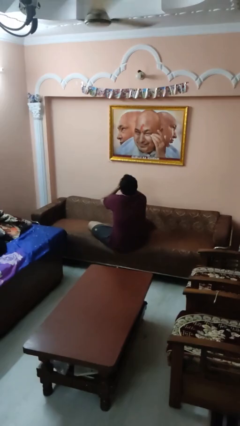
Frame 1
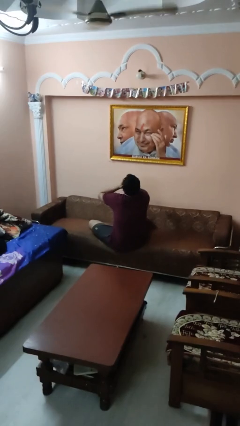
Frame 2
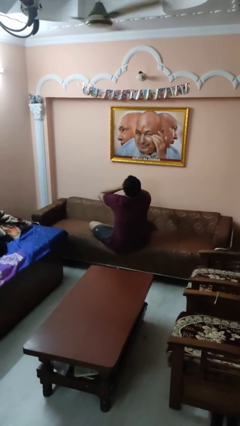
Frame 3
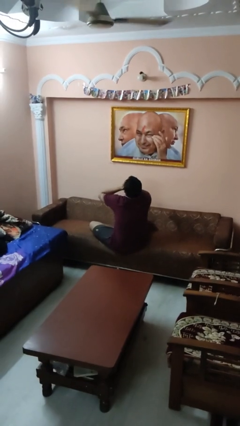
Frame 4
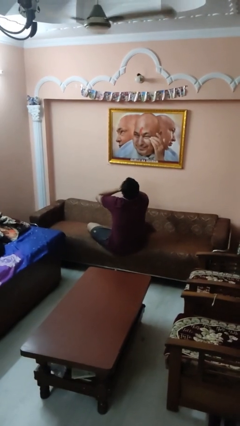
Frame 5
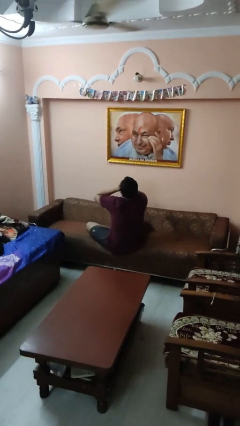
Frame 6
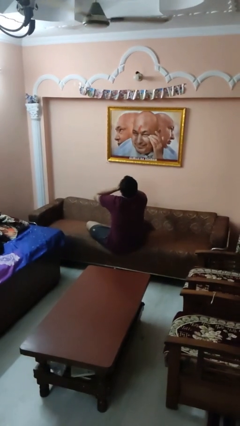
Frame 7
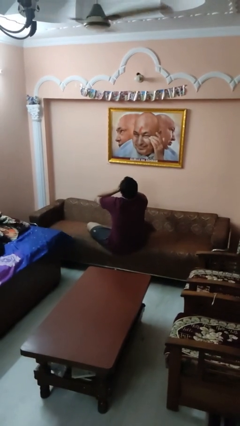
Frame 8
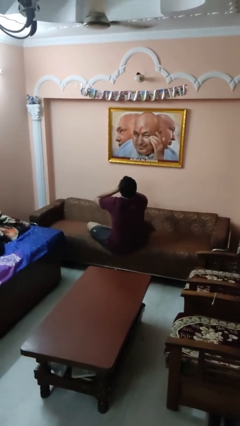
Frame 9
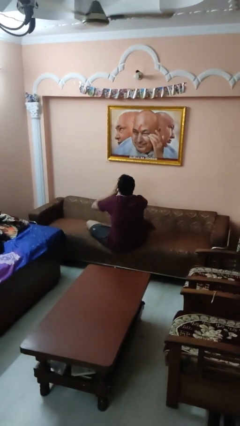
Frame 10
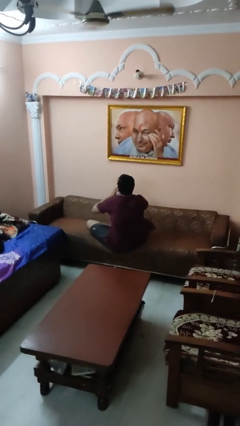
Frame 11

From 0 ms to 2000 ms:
person covers face with hands

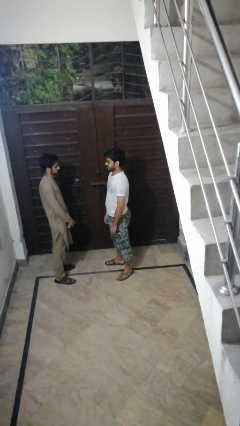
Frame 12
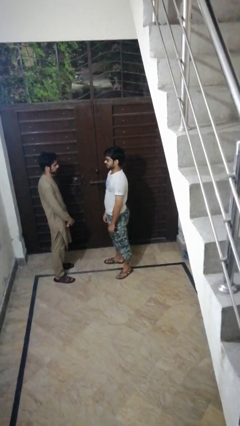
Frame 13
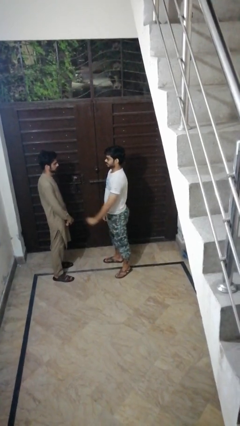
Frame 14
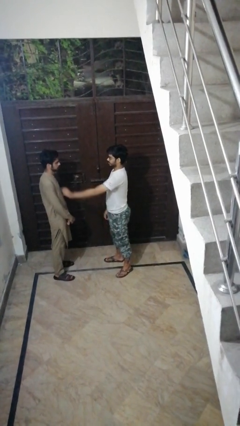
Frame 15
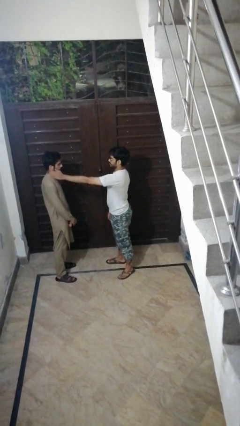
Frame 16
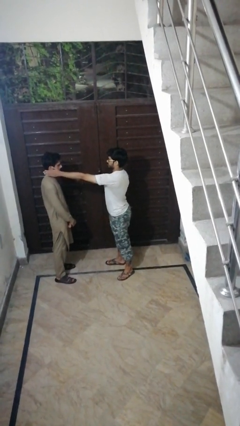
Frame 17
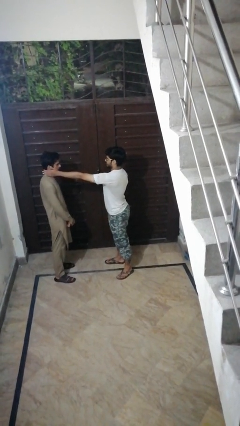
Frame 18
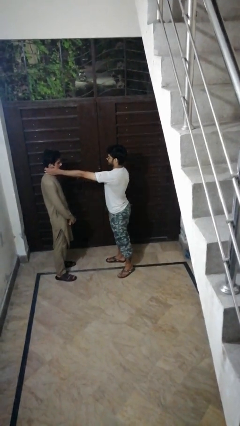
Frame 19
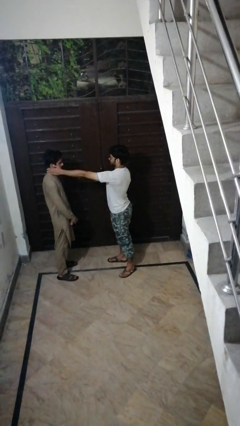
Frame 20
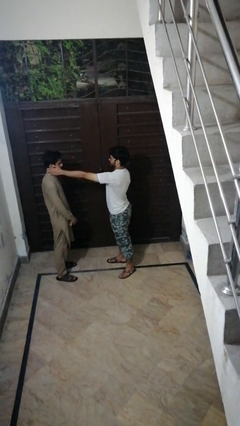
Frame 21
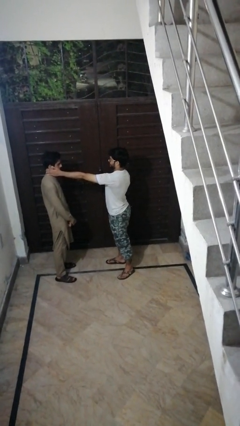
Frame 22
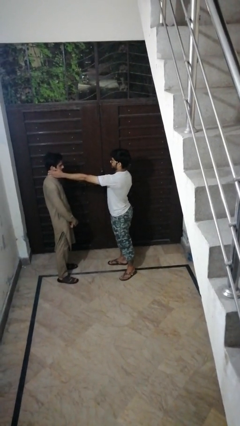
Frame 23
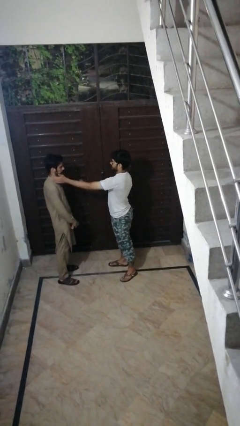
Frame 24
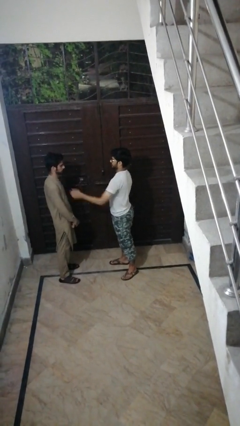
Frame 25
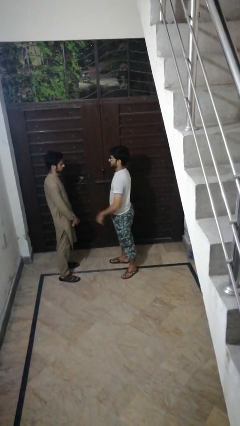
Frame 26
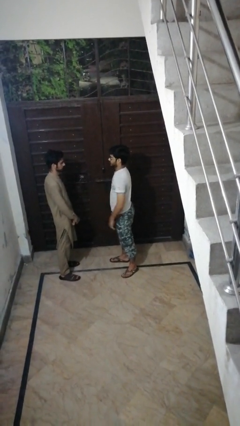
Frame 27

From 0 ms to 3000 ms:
person touches face of person

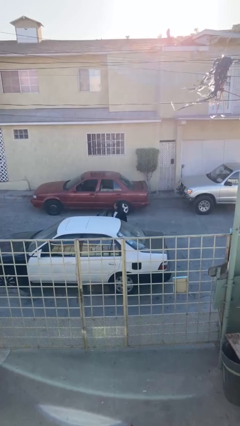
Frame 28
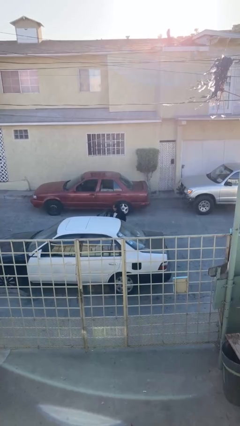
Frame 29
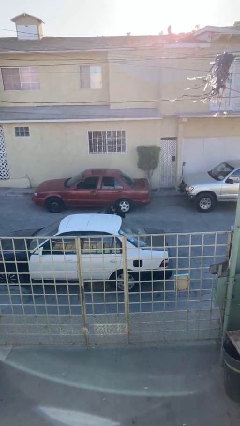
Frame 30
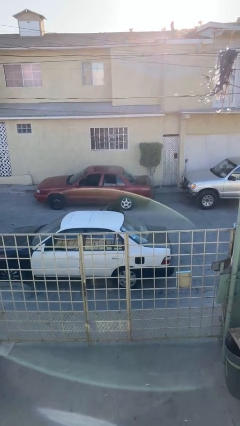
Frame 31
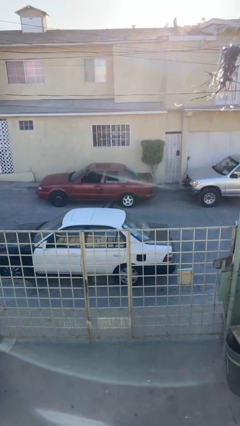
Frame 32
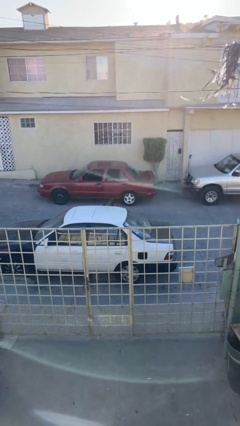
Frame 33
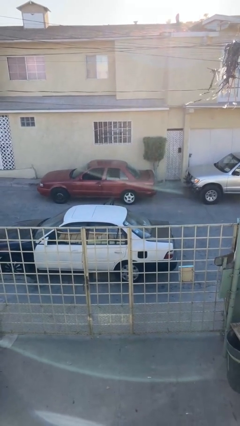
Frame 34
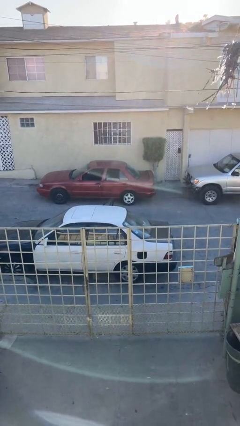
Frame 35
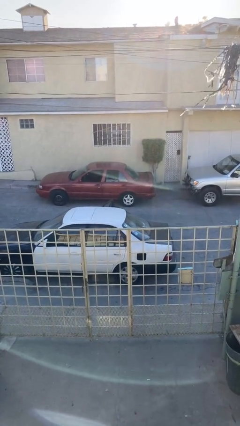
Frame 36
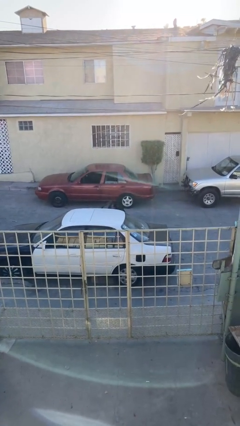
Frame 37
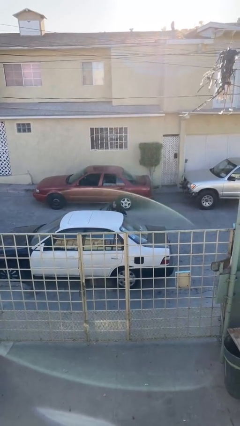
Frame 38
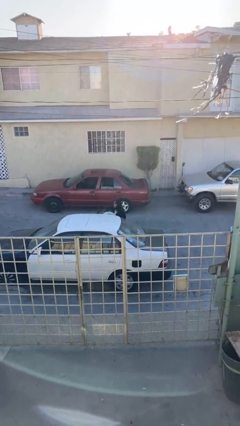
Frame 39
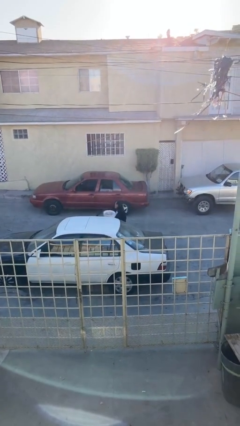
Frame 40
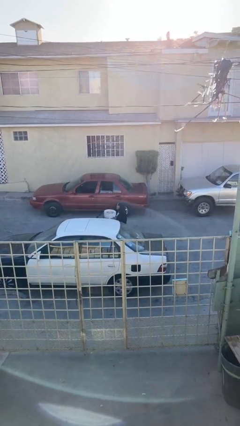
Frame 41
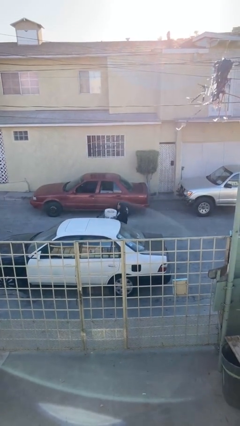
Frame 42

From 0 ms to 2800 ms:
person unloads car

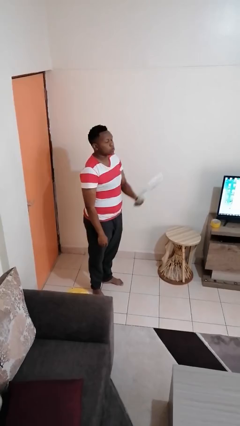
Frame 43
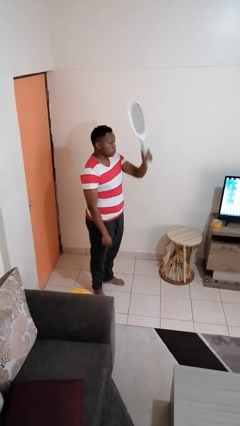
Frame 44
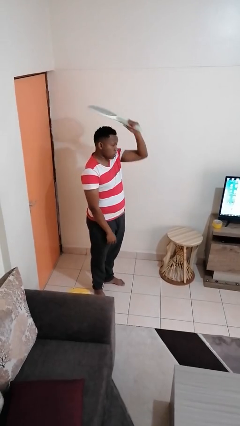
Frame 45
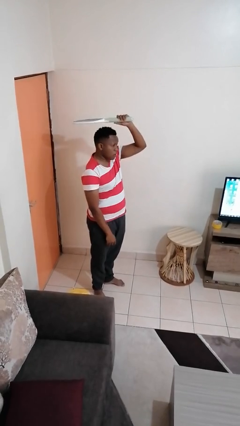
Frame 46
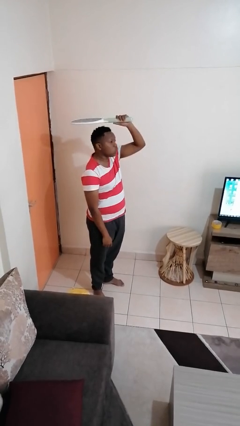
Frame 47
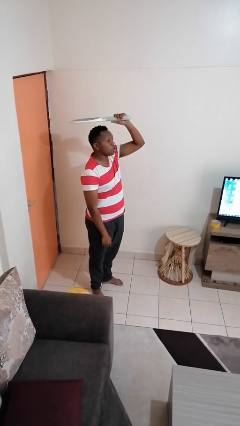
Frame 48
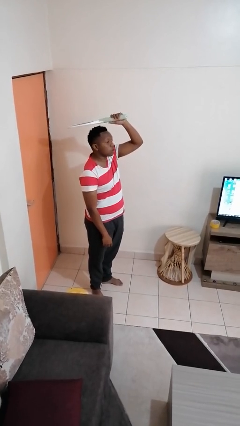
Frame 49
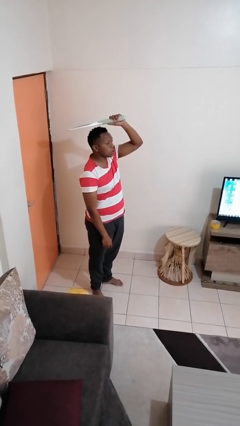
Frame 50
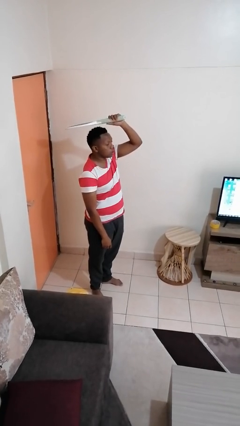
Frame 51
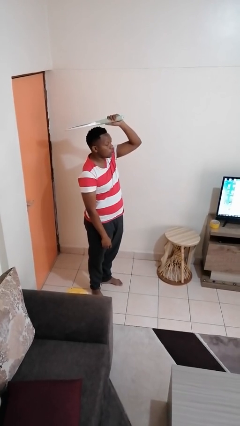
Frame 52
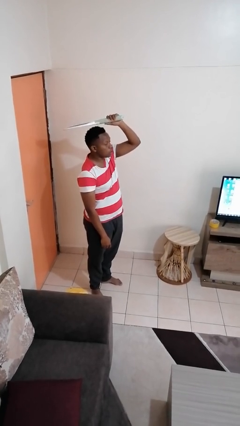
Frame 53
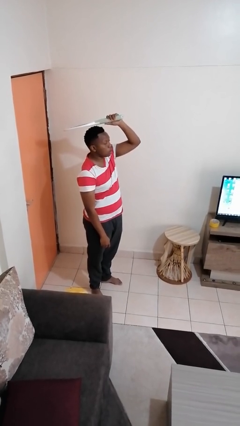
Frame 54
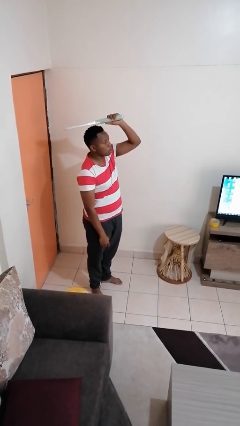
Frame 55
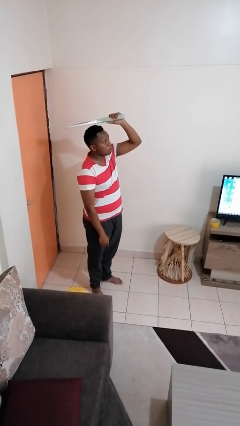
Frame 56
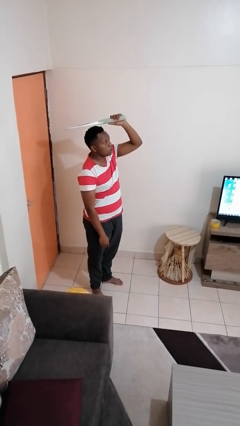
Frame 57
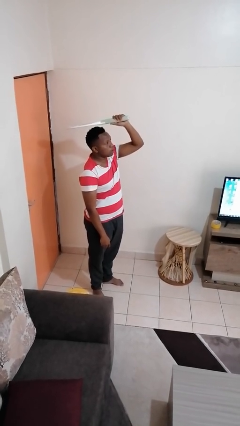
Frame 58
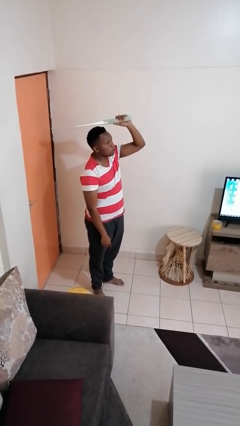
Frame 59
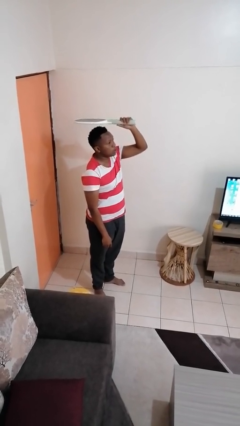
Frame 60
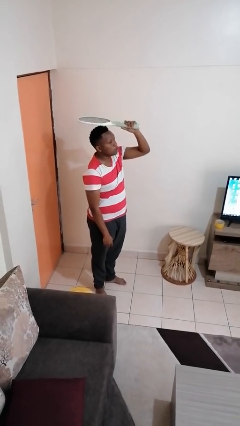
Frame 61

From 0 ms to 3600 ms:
person holds object above head

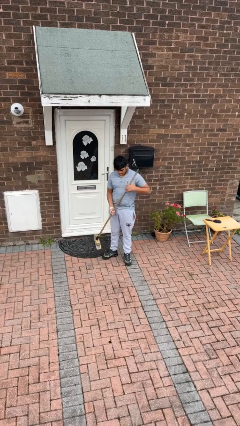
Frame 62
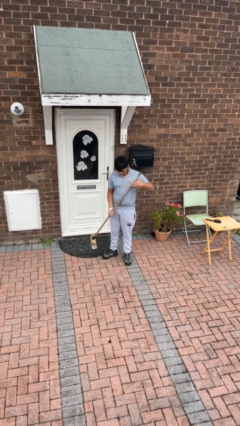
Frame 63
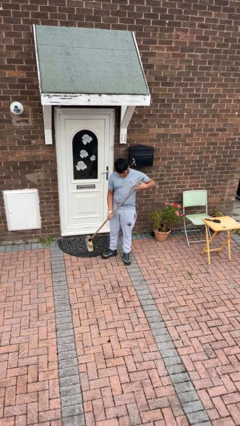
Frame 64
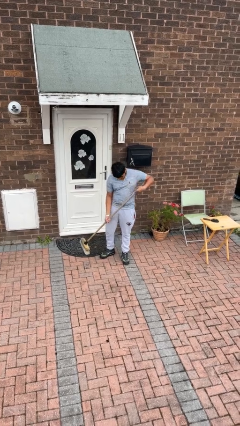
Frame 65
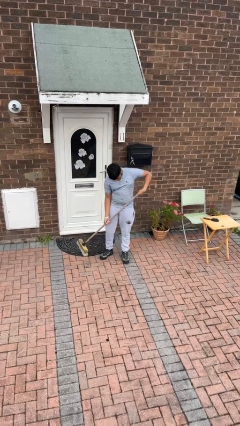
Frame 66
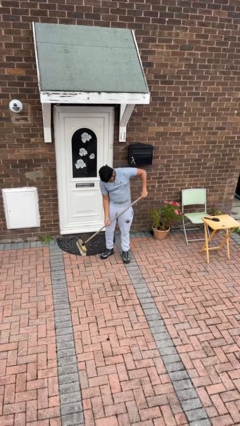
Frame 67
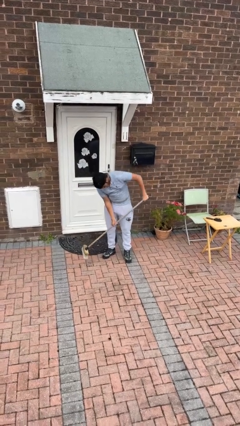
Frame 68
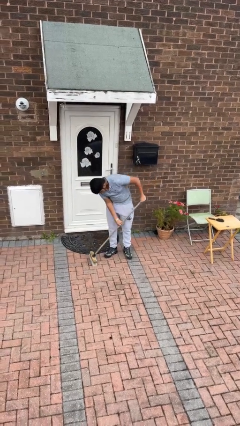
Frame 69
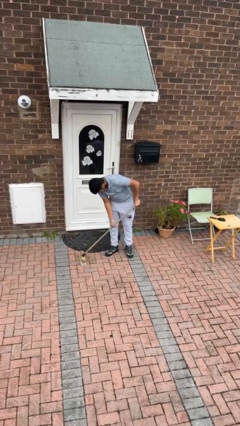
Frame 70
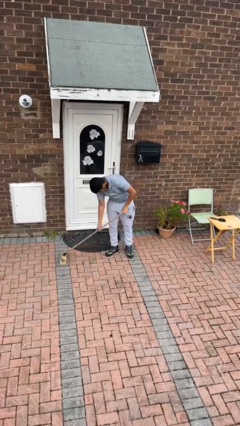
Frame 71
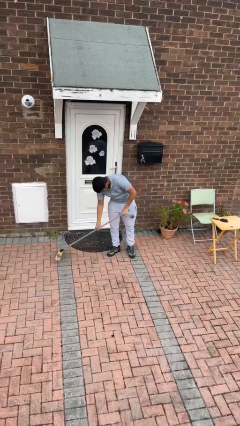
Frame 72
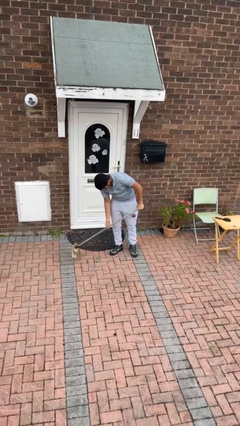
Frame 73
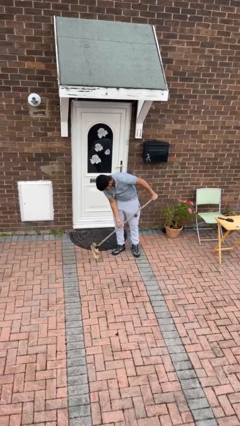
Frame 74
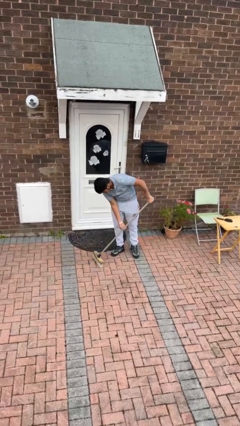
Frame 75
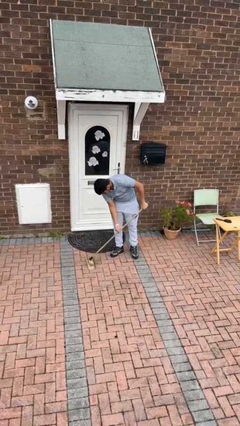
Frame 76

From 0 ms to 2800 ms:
person sweeps floor

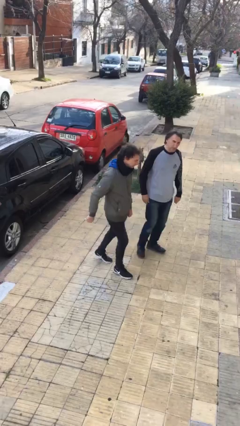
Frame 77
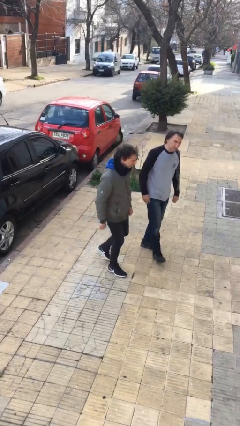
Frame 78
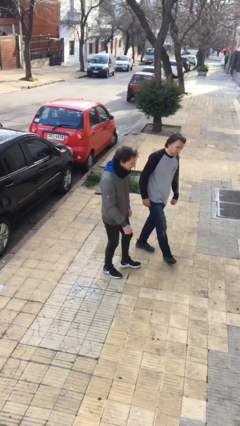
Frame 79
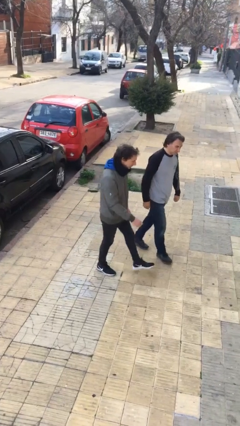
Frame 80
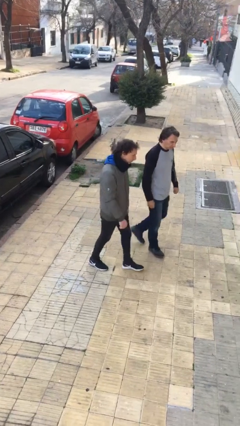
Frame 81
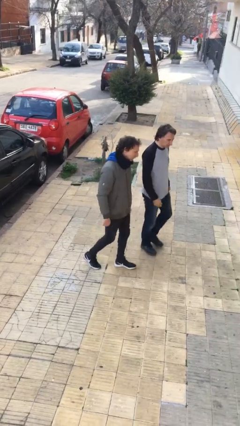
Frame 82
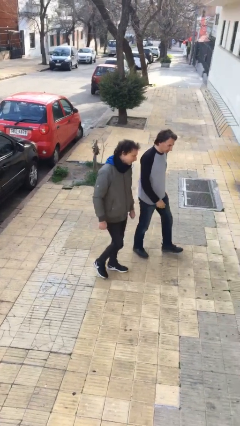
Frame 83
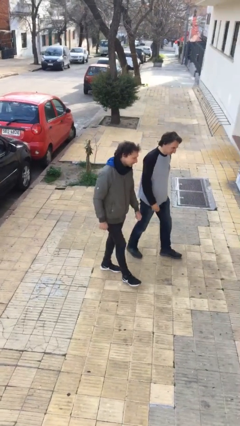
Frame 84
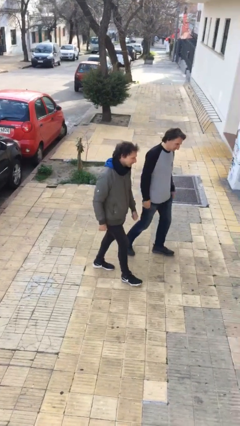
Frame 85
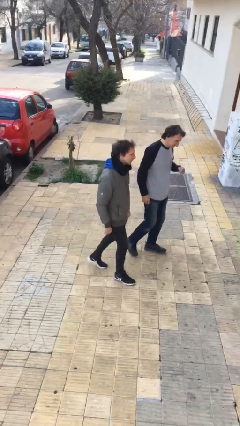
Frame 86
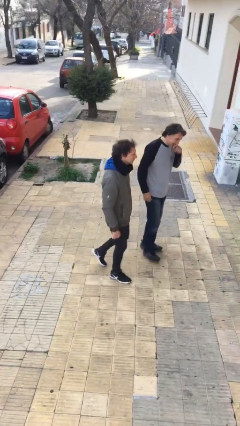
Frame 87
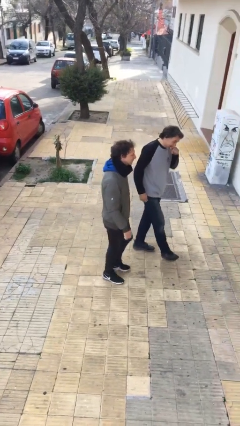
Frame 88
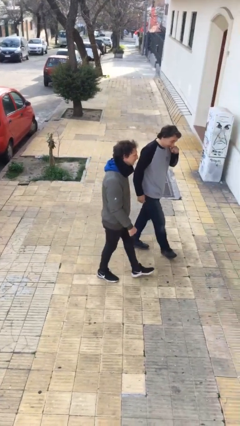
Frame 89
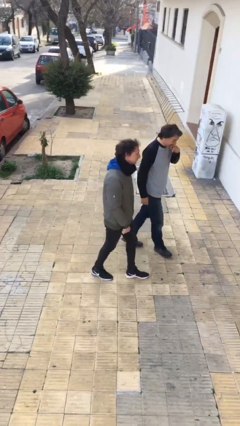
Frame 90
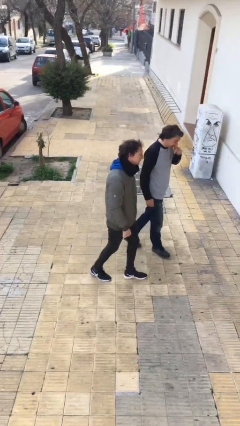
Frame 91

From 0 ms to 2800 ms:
person talks to person

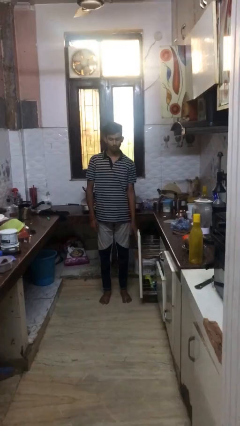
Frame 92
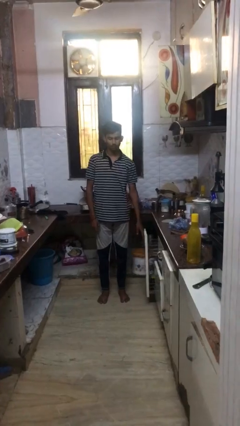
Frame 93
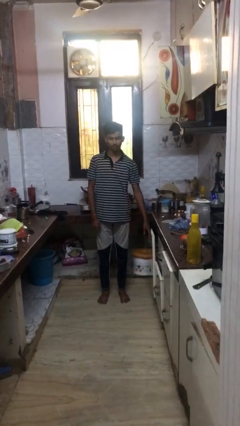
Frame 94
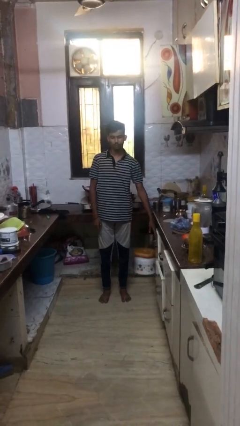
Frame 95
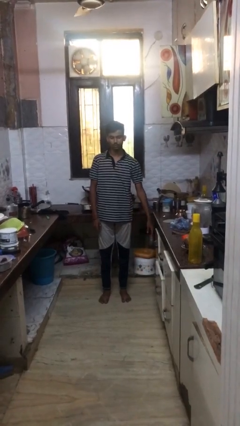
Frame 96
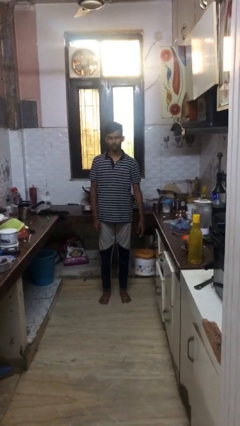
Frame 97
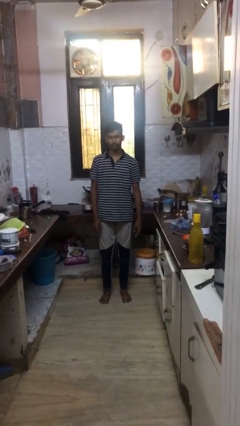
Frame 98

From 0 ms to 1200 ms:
person closes dishwasher
